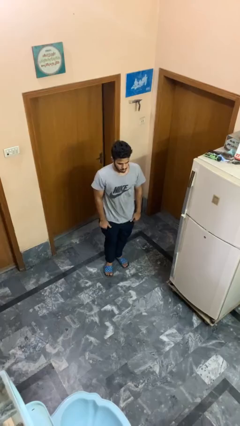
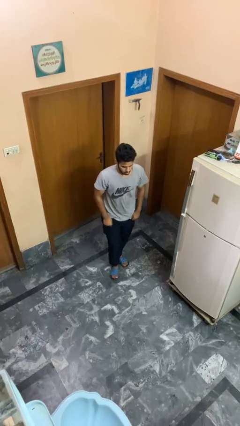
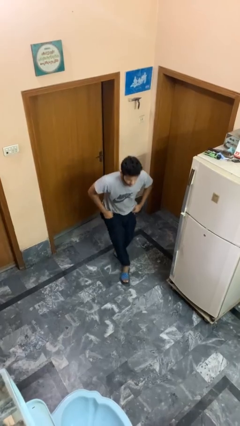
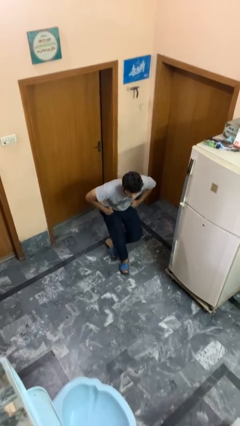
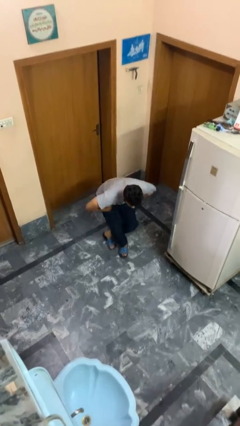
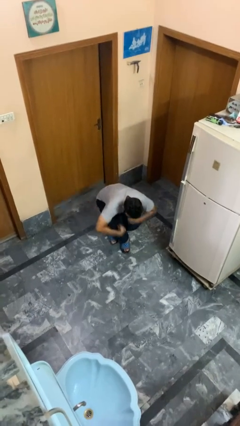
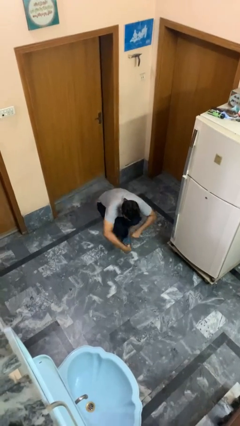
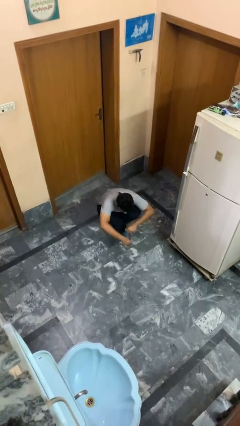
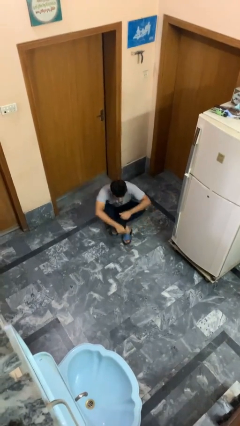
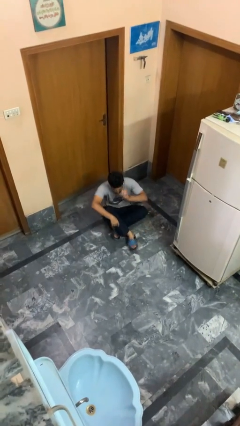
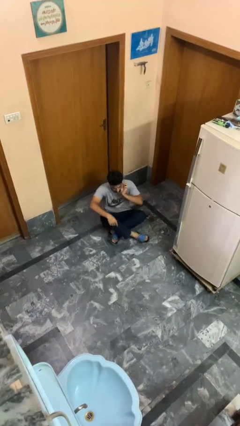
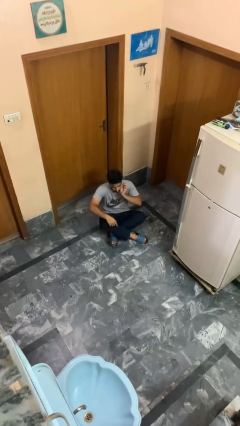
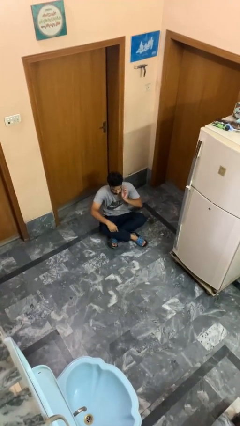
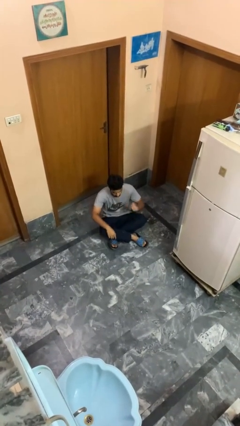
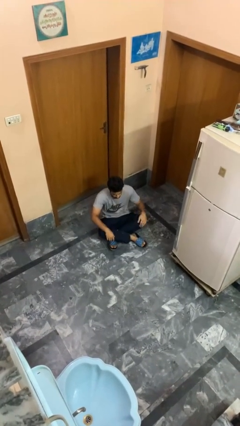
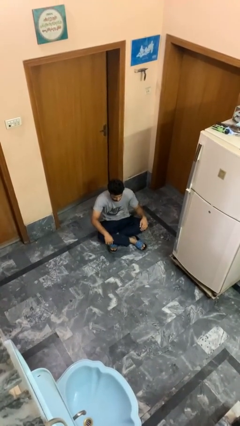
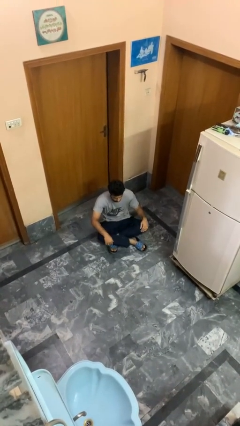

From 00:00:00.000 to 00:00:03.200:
person sits crisscross

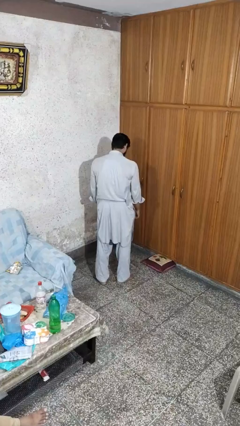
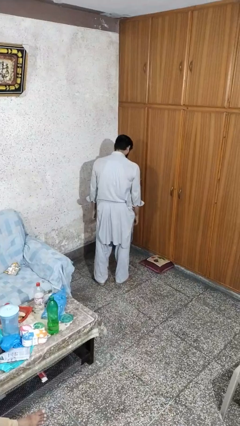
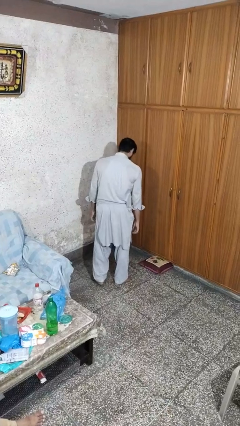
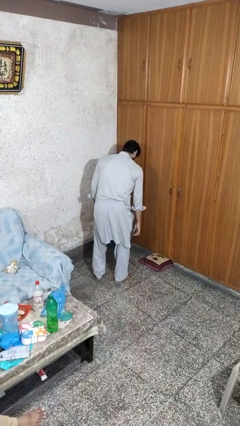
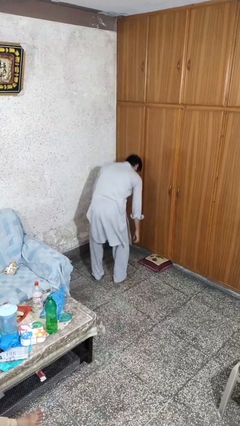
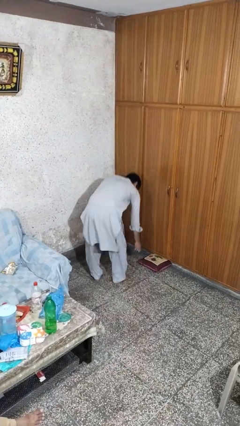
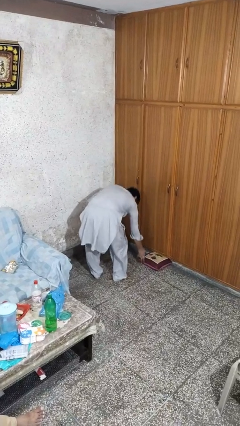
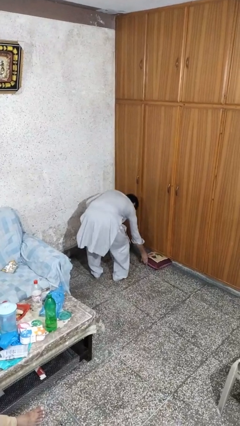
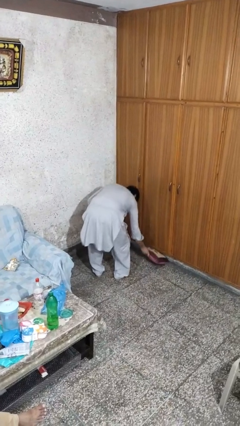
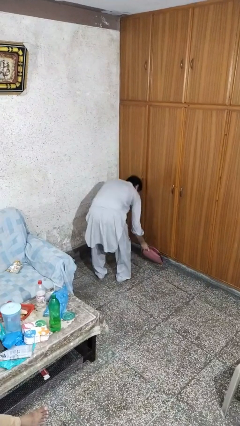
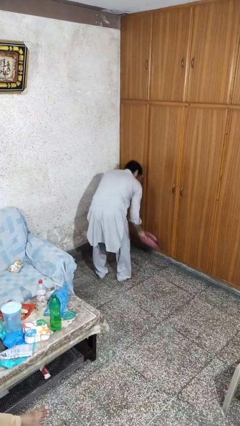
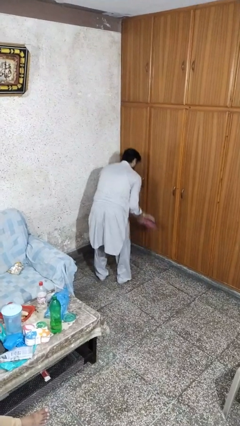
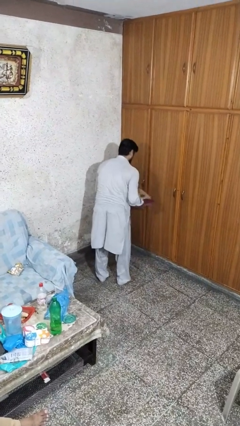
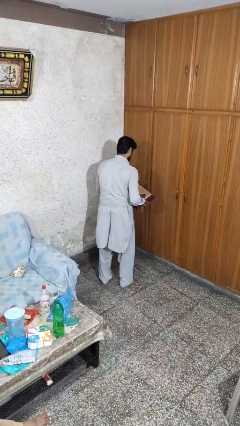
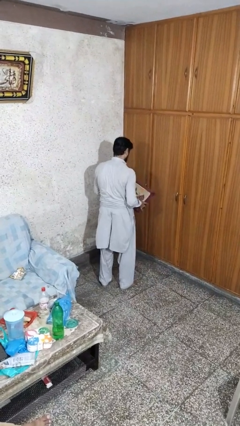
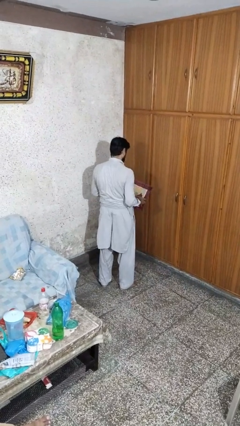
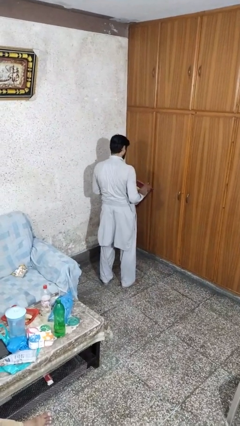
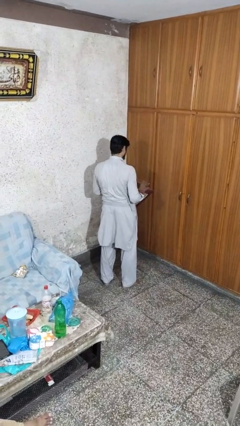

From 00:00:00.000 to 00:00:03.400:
person picks up object from floor

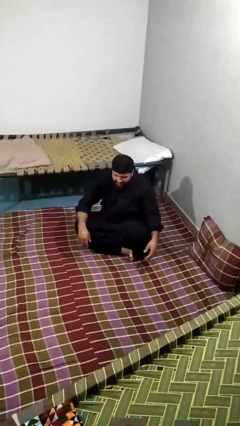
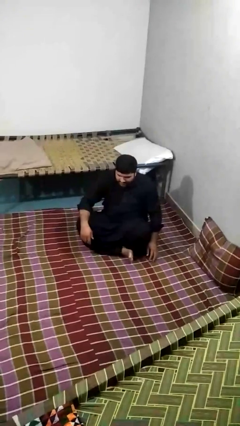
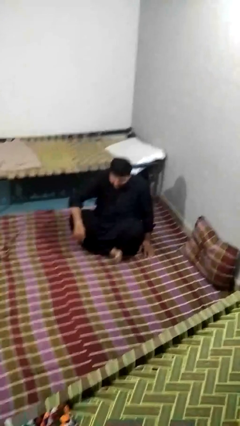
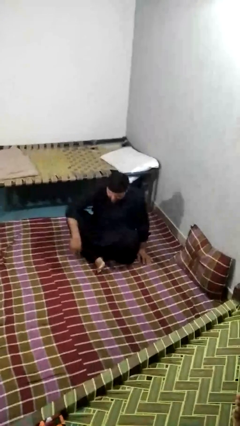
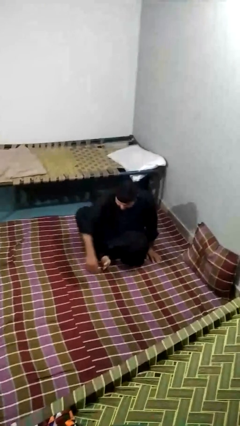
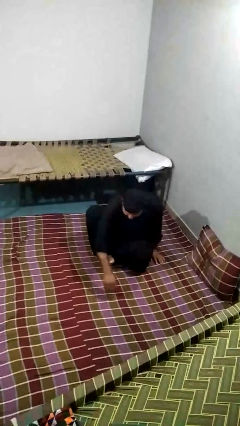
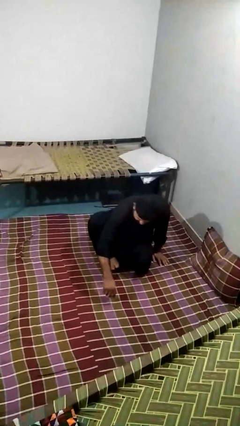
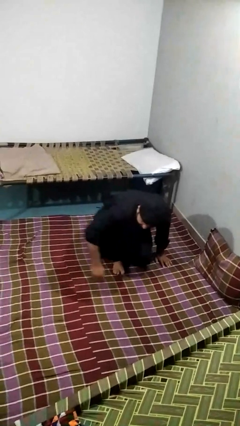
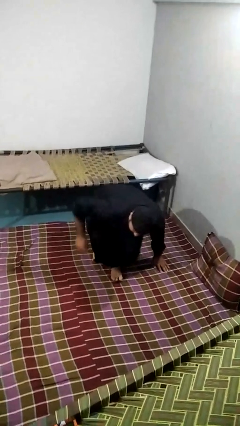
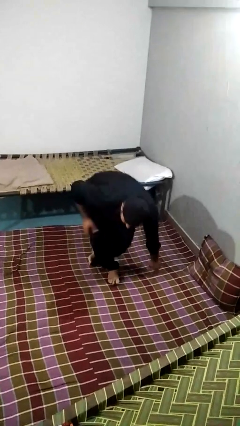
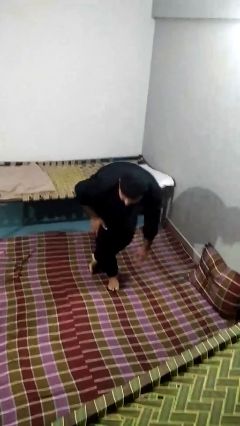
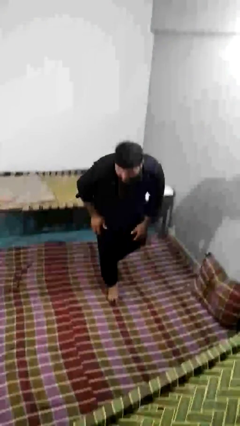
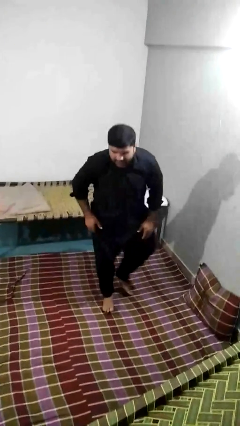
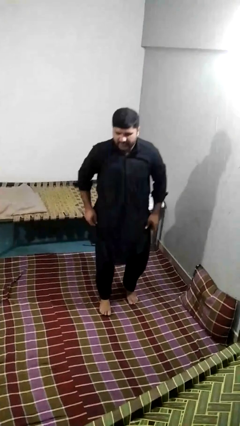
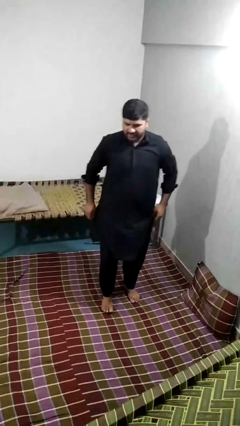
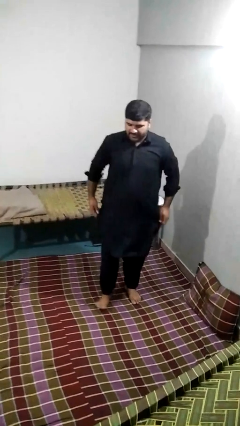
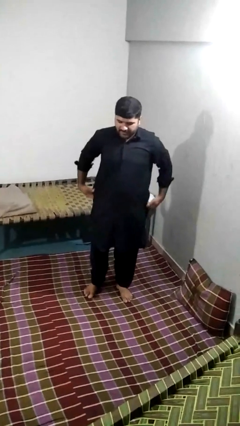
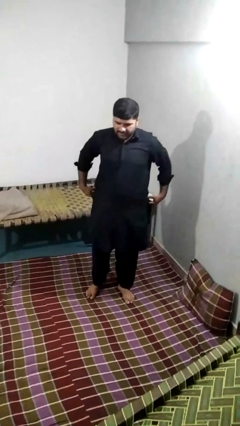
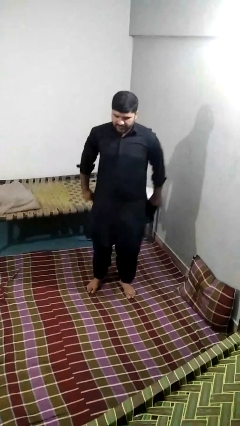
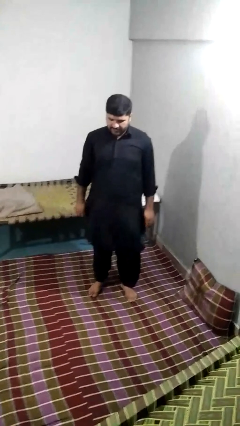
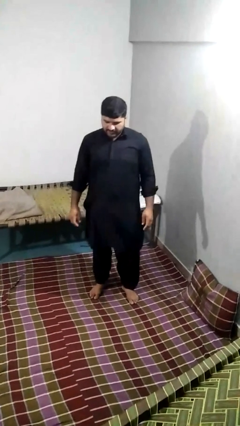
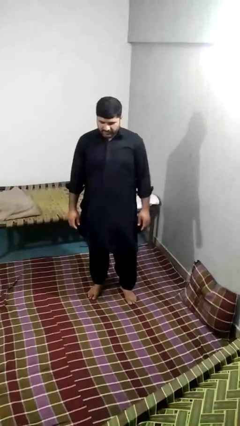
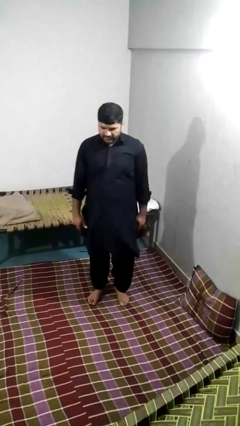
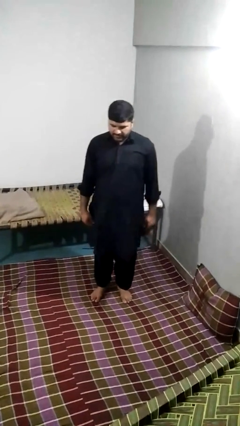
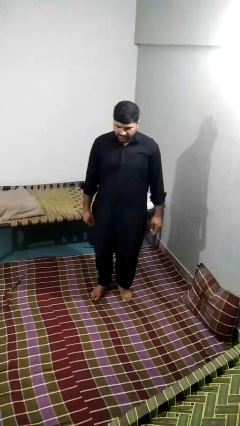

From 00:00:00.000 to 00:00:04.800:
person stands up from floor

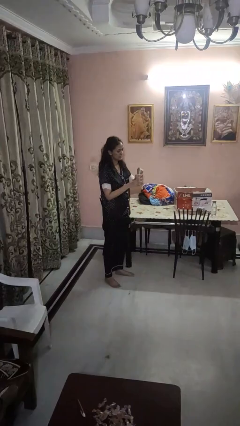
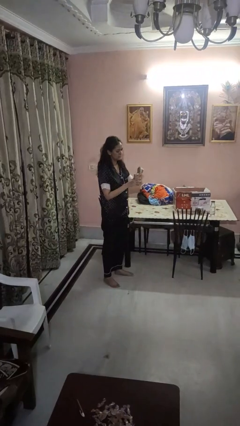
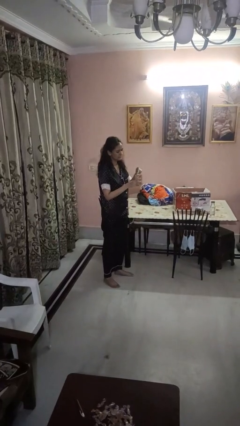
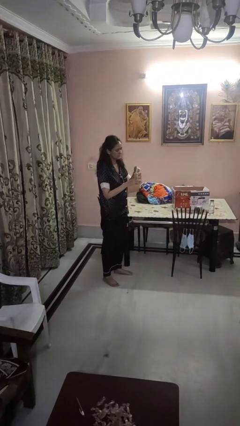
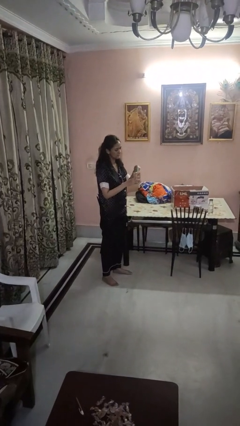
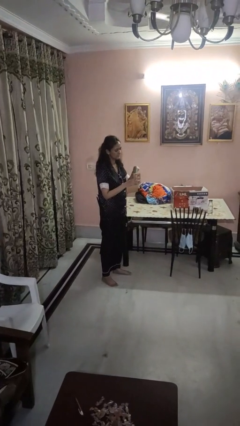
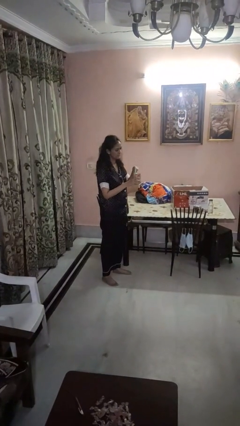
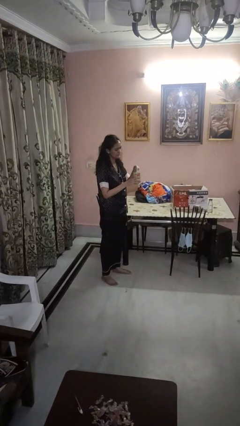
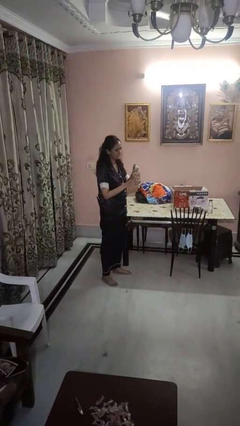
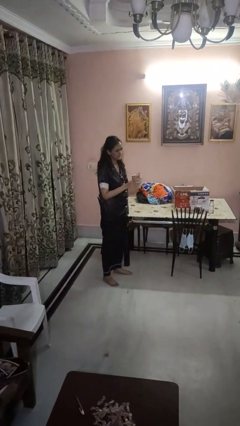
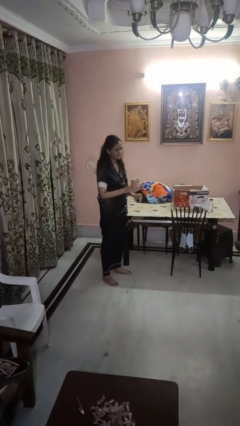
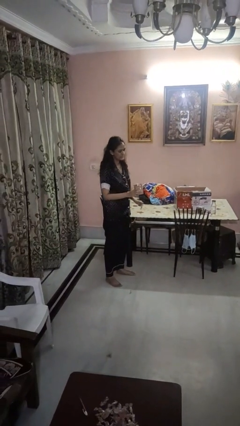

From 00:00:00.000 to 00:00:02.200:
person opens can with can opener

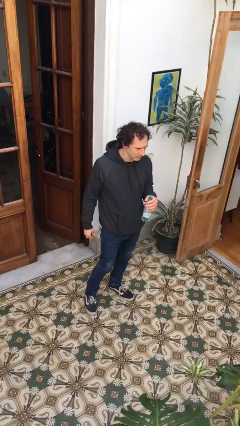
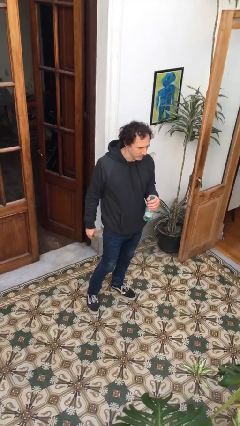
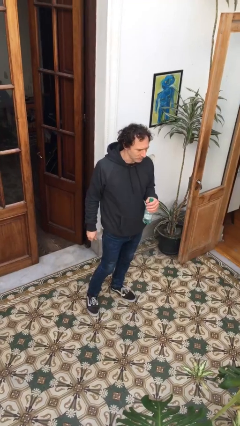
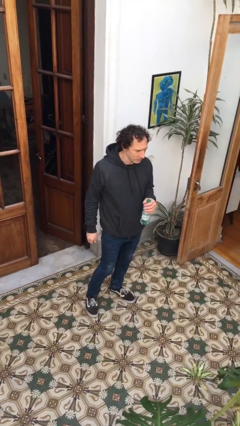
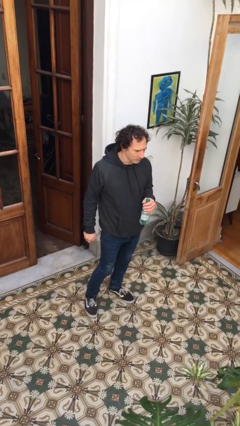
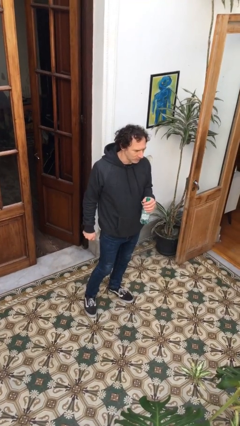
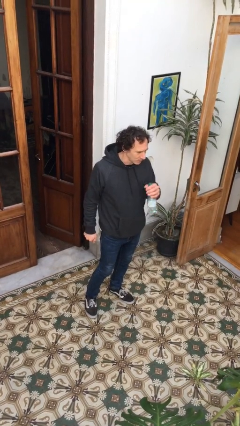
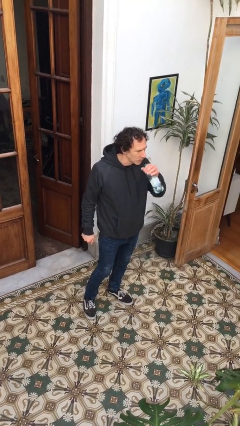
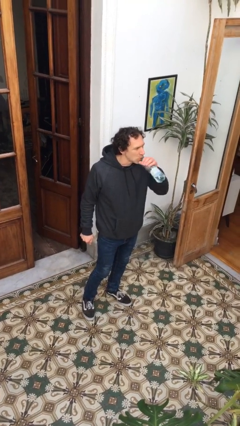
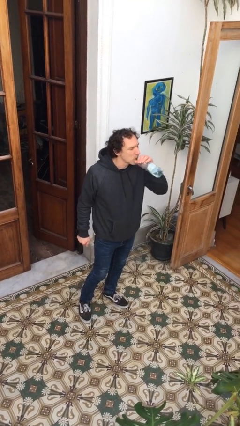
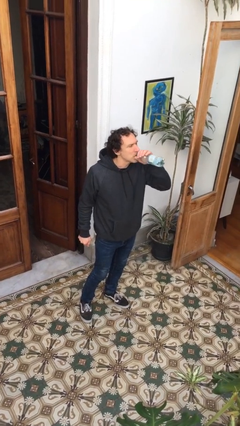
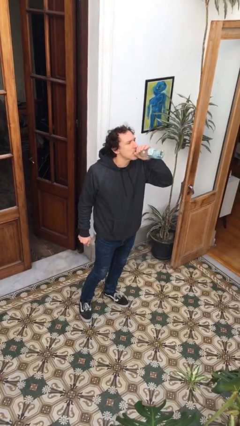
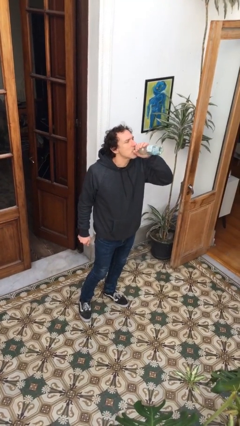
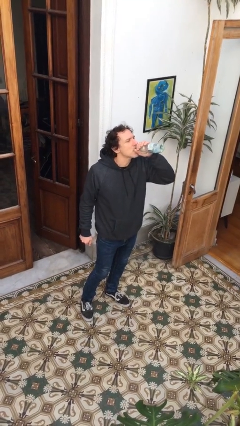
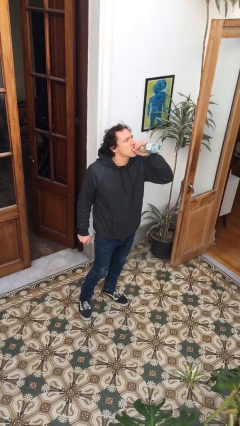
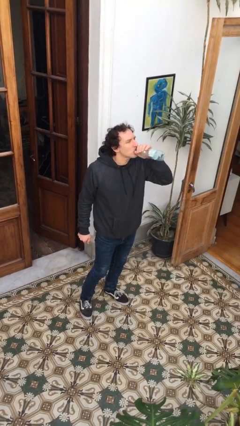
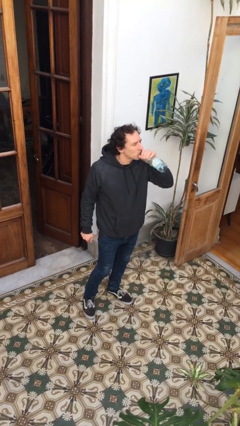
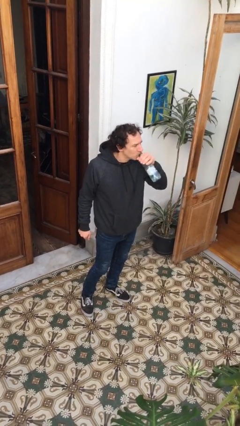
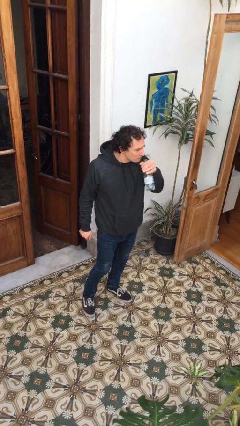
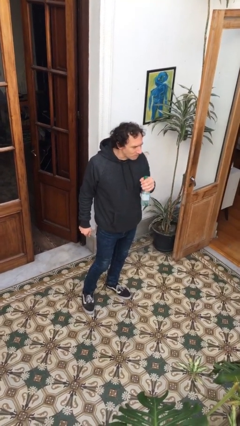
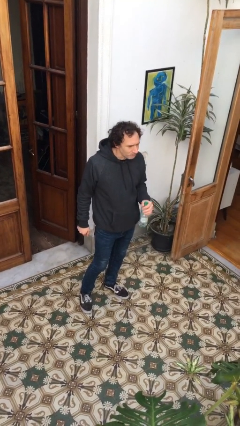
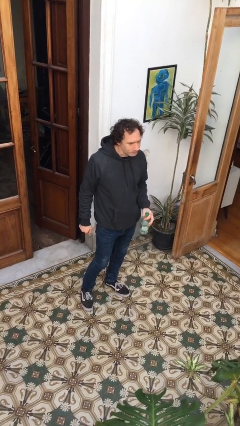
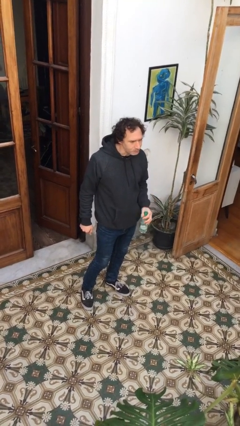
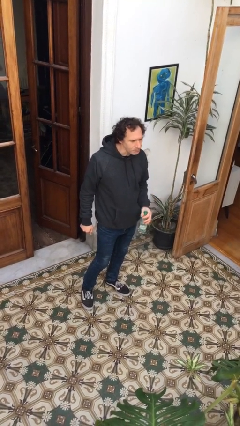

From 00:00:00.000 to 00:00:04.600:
person drinks from bottle
